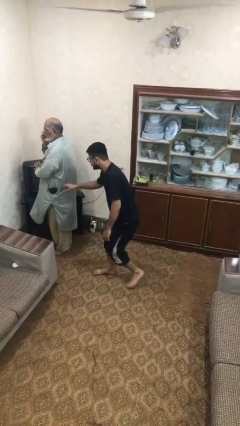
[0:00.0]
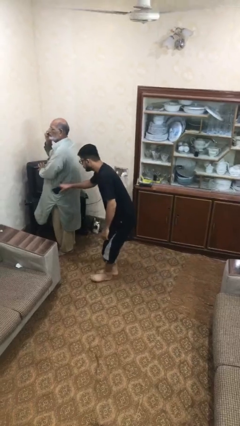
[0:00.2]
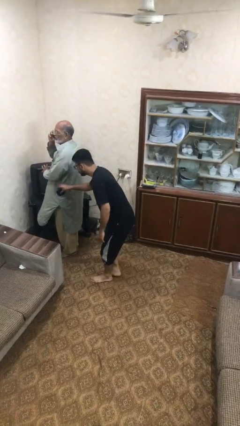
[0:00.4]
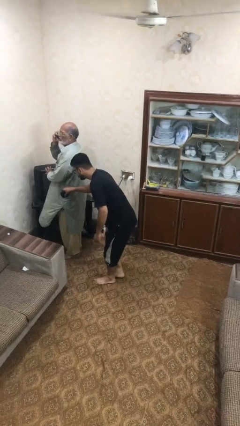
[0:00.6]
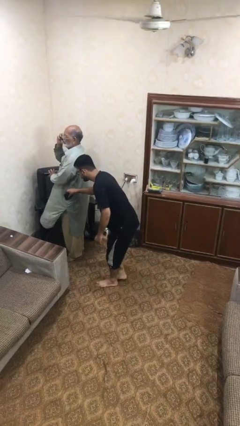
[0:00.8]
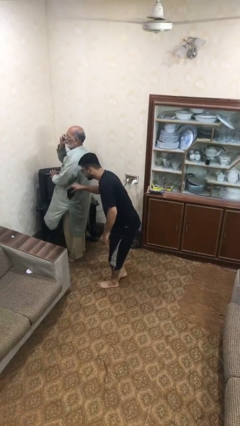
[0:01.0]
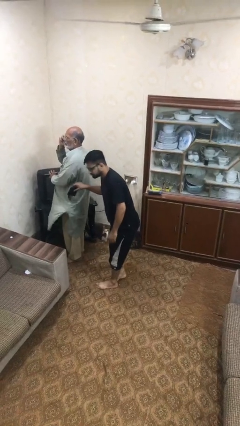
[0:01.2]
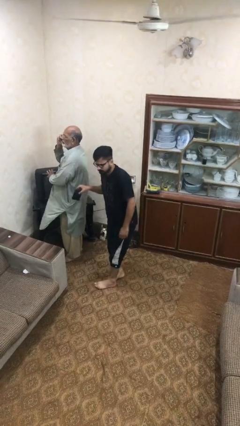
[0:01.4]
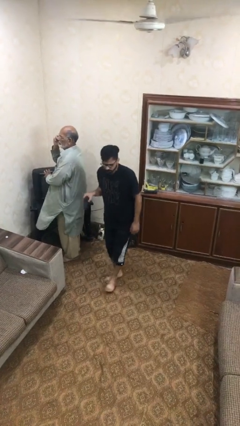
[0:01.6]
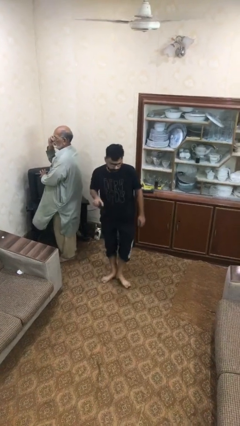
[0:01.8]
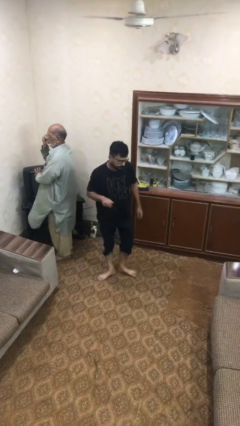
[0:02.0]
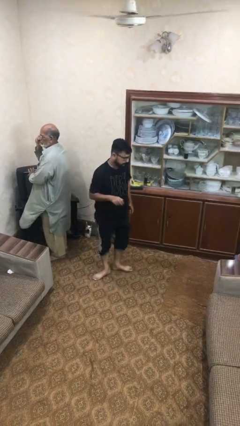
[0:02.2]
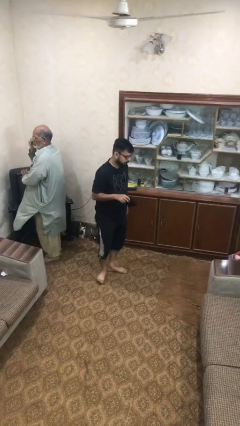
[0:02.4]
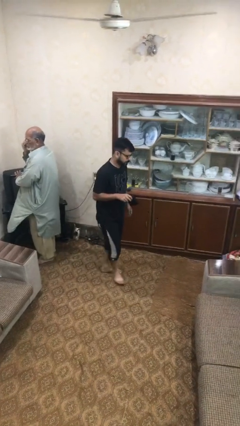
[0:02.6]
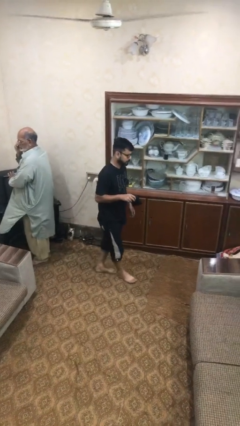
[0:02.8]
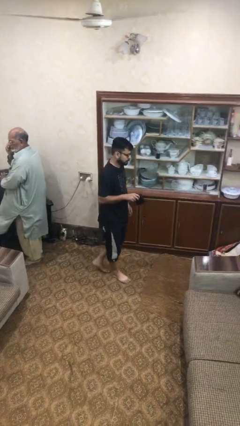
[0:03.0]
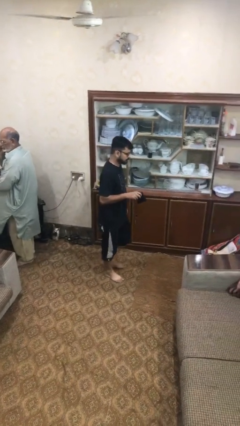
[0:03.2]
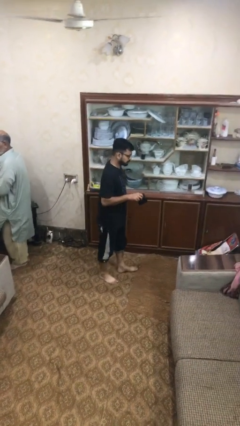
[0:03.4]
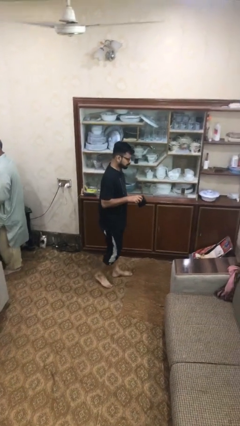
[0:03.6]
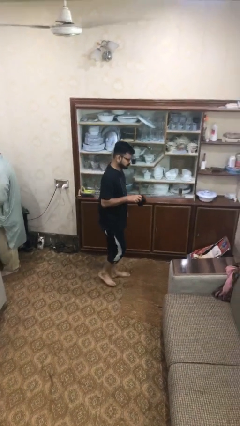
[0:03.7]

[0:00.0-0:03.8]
person steals object from person

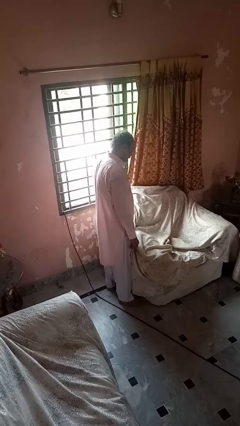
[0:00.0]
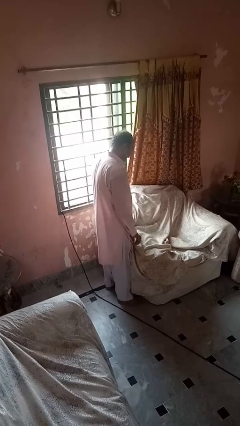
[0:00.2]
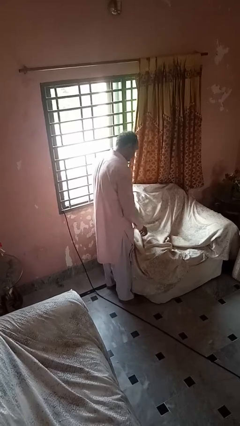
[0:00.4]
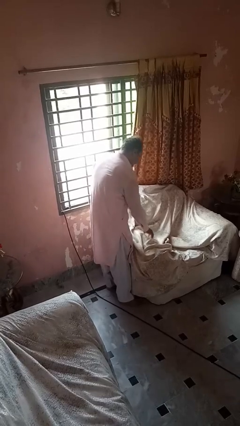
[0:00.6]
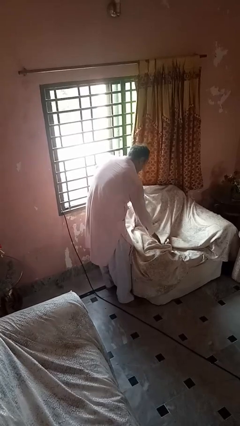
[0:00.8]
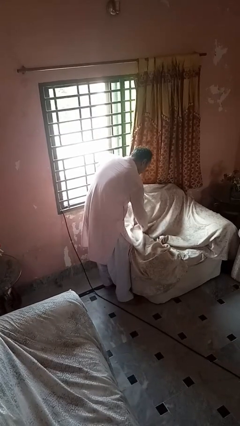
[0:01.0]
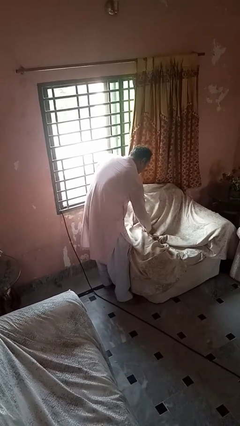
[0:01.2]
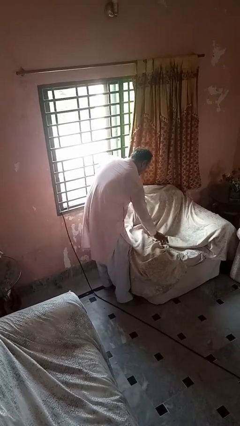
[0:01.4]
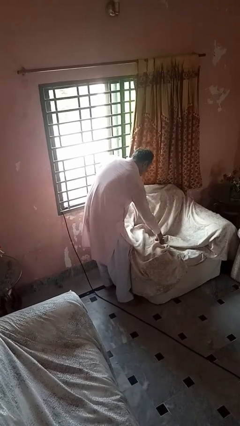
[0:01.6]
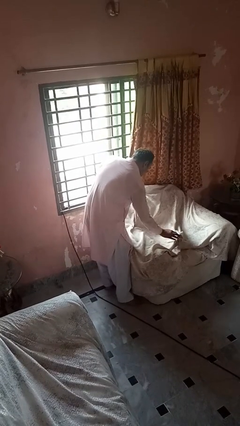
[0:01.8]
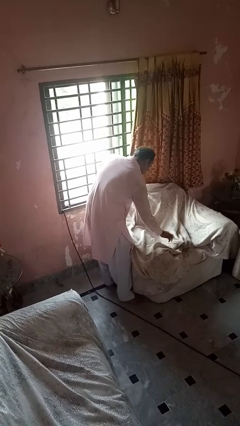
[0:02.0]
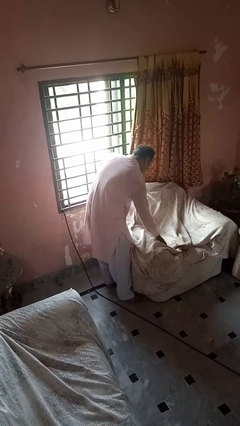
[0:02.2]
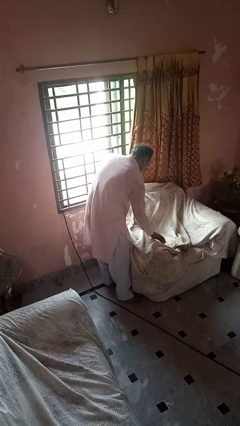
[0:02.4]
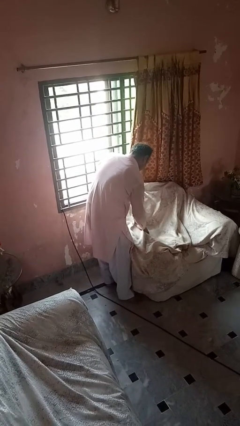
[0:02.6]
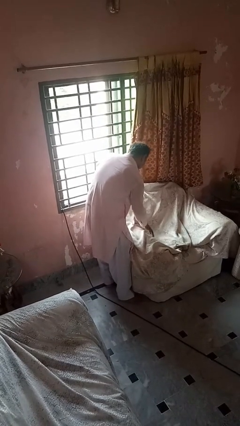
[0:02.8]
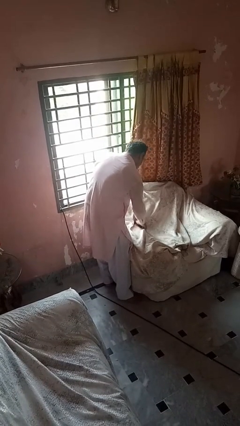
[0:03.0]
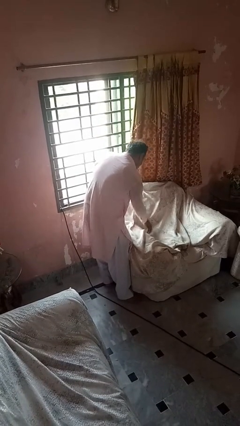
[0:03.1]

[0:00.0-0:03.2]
person searches in couch

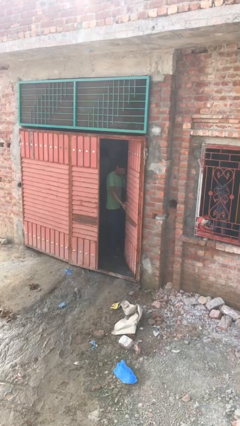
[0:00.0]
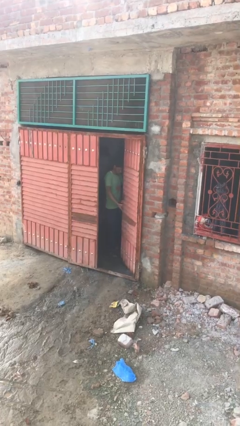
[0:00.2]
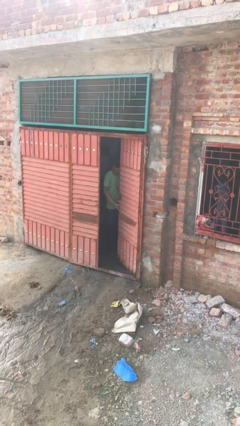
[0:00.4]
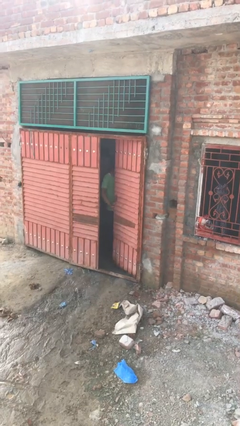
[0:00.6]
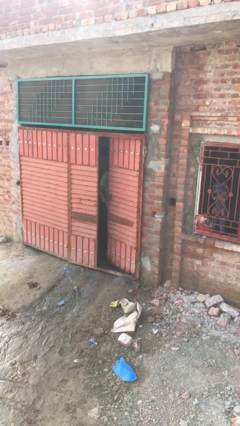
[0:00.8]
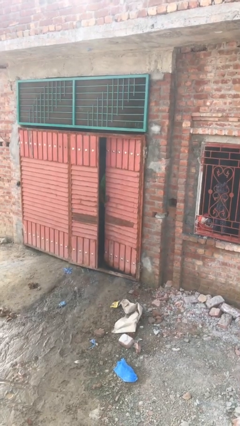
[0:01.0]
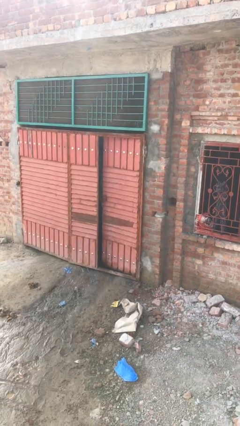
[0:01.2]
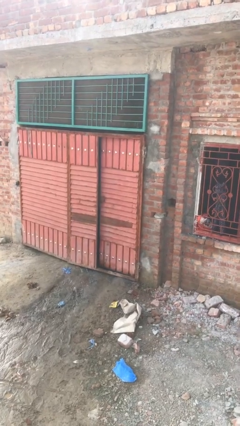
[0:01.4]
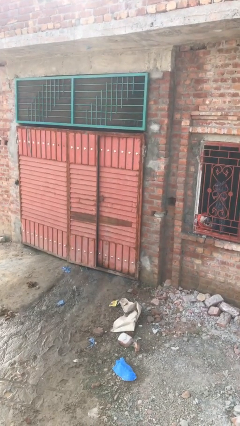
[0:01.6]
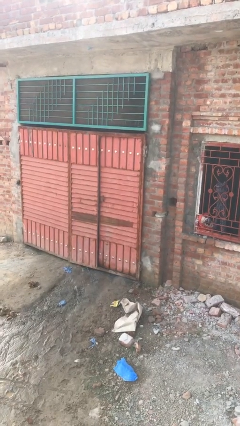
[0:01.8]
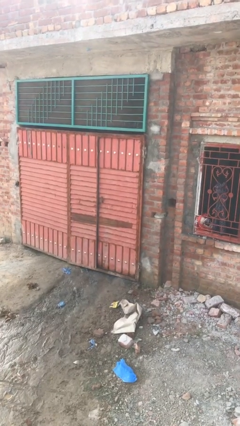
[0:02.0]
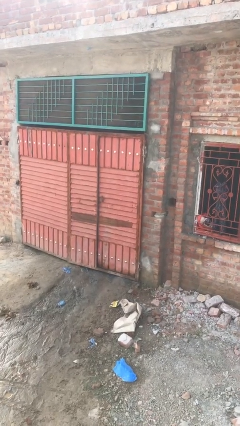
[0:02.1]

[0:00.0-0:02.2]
person closes facility door

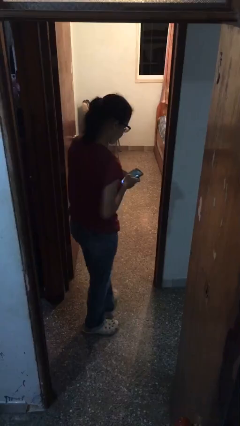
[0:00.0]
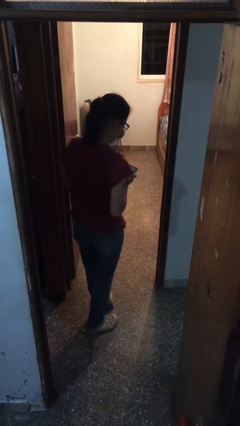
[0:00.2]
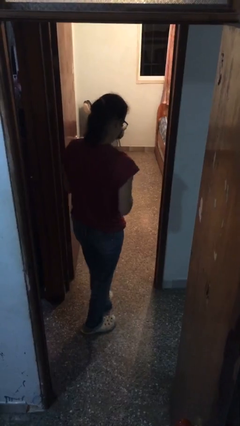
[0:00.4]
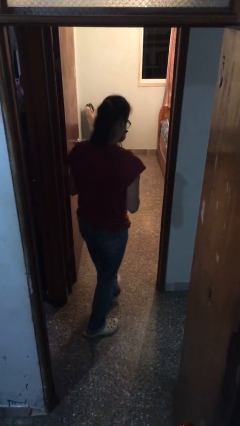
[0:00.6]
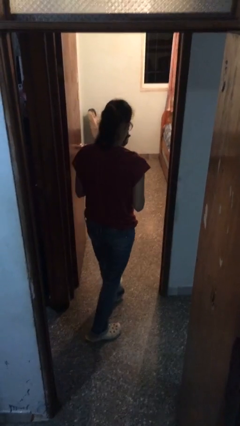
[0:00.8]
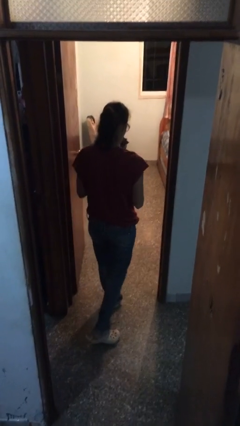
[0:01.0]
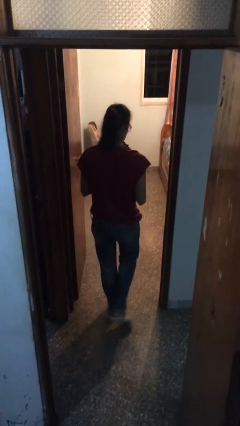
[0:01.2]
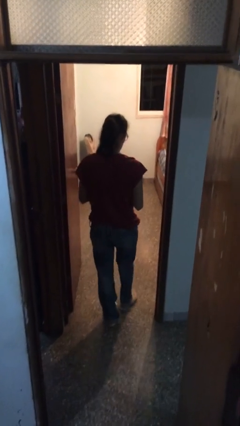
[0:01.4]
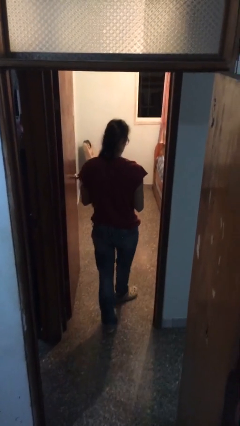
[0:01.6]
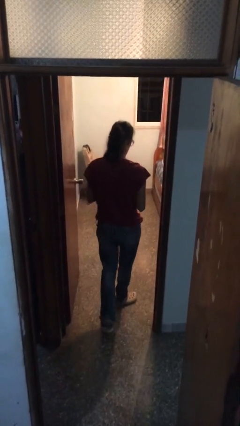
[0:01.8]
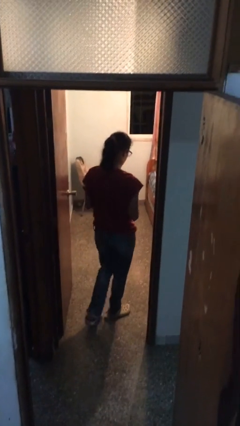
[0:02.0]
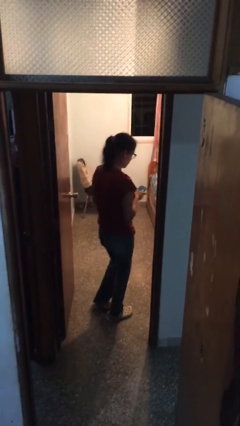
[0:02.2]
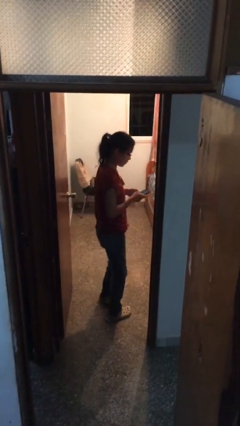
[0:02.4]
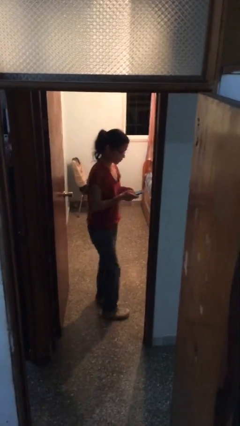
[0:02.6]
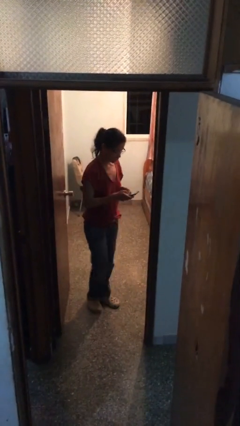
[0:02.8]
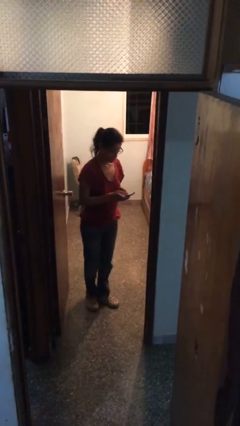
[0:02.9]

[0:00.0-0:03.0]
person exits scene through structure

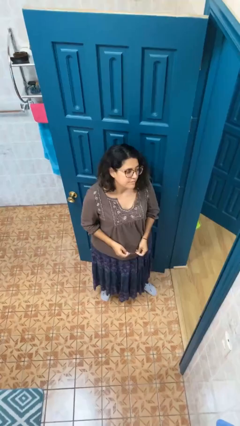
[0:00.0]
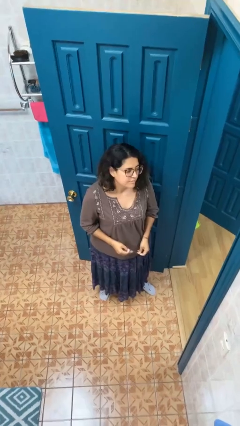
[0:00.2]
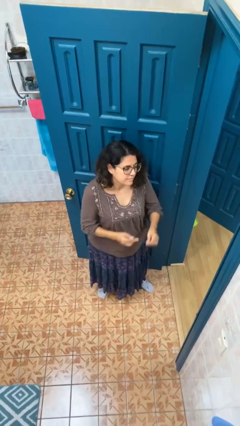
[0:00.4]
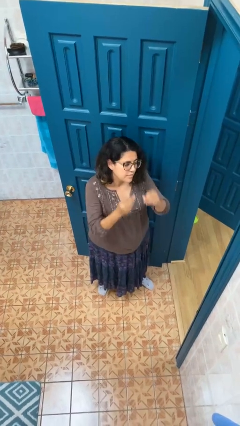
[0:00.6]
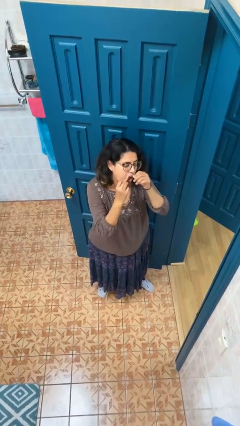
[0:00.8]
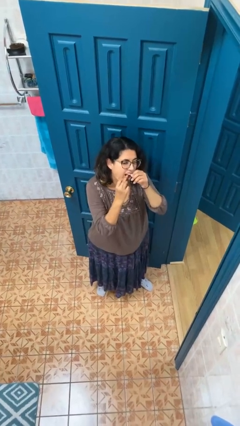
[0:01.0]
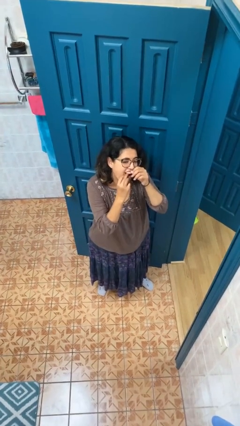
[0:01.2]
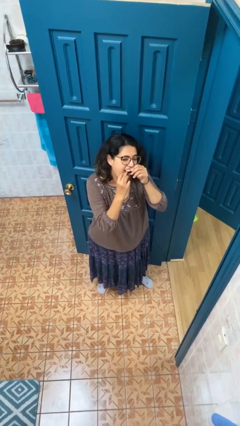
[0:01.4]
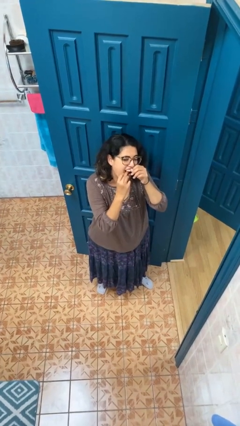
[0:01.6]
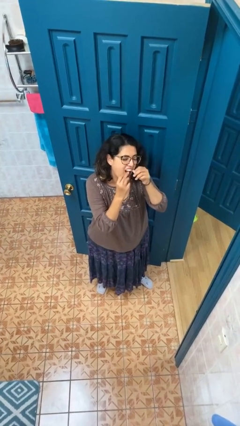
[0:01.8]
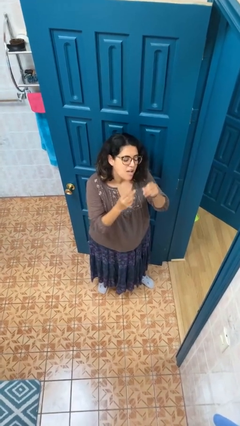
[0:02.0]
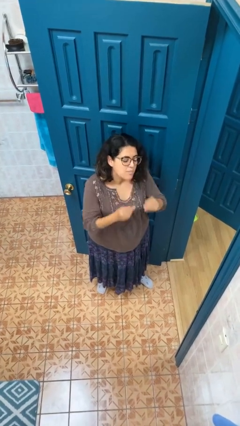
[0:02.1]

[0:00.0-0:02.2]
person flosses

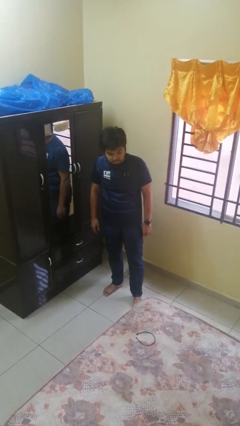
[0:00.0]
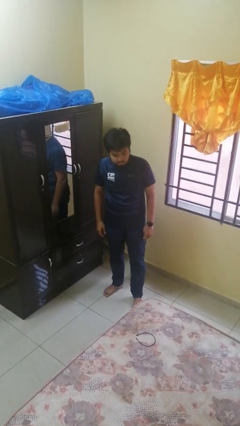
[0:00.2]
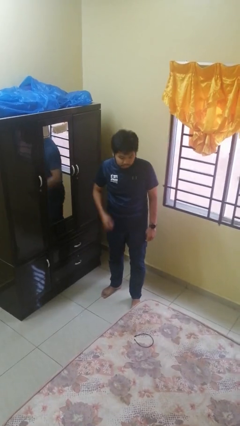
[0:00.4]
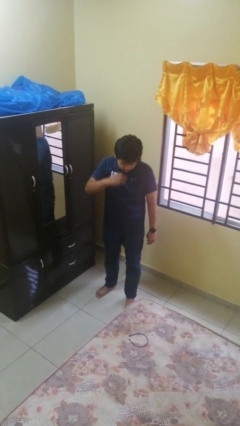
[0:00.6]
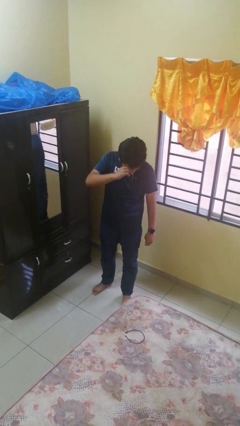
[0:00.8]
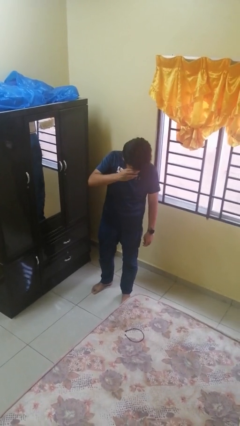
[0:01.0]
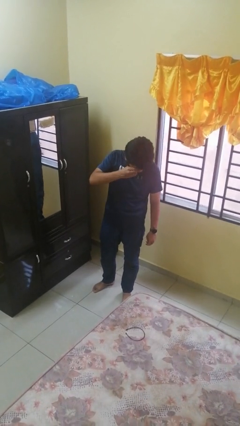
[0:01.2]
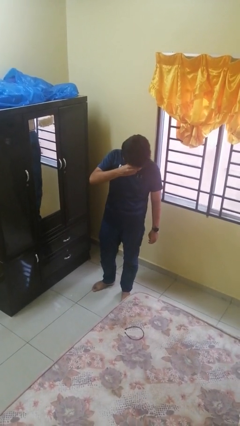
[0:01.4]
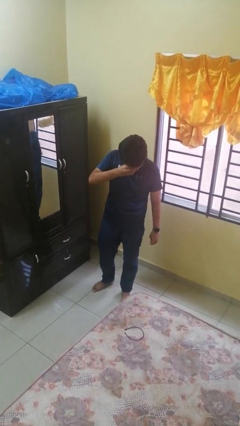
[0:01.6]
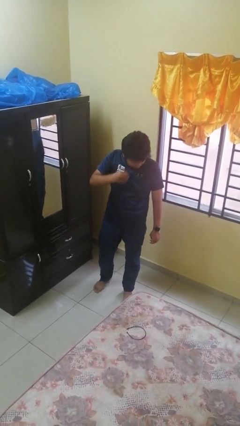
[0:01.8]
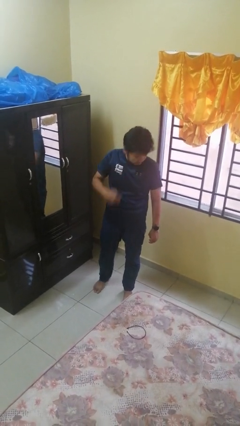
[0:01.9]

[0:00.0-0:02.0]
person scratches face

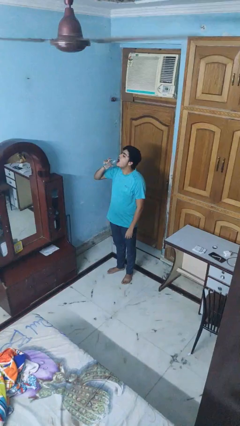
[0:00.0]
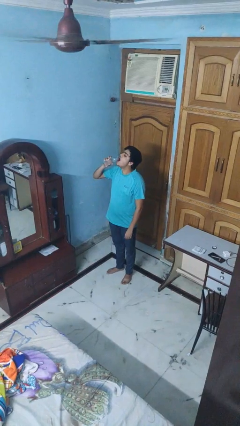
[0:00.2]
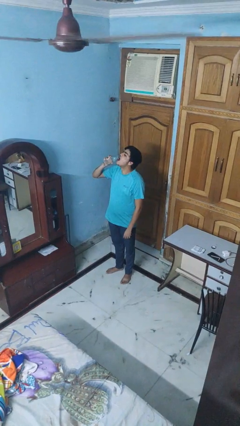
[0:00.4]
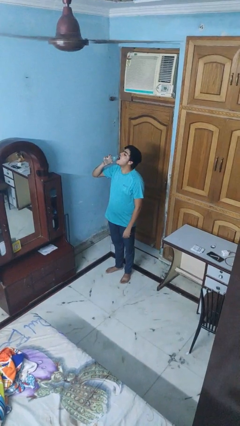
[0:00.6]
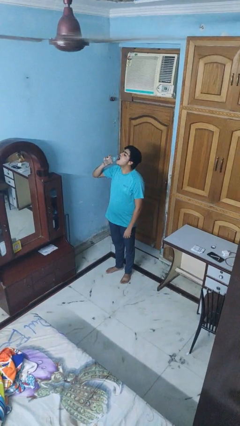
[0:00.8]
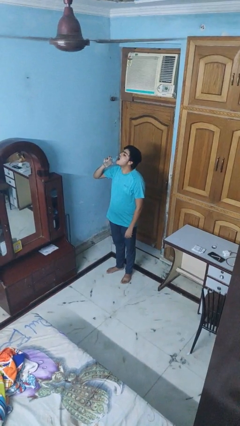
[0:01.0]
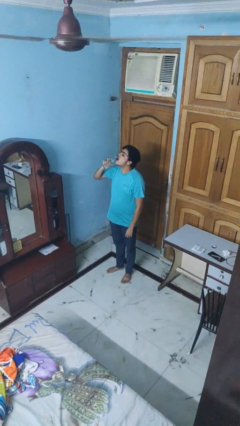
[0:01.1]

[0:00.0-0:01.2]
person drinks from bottle
